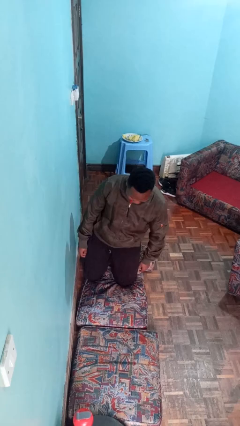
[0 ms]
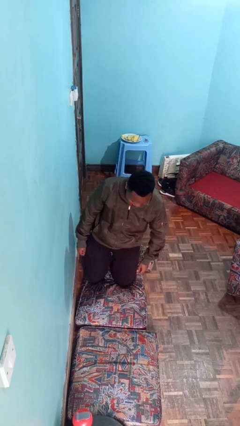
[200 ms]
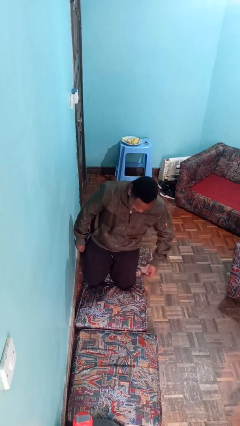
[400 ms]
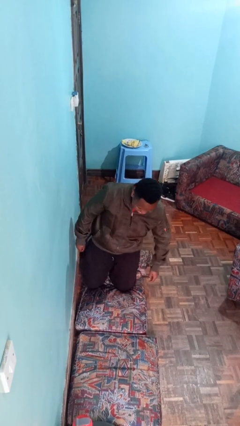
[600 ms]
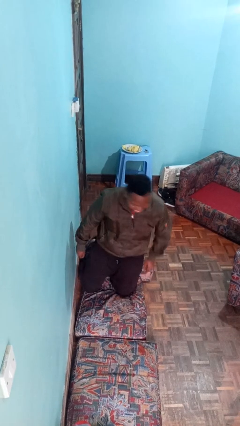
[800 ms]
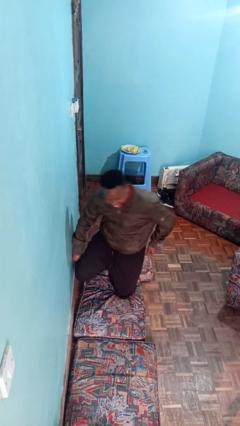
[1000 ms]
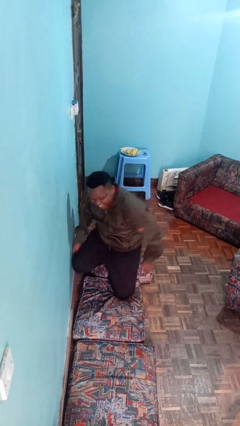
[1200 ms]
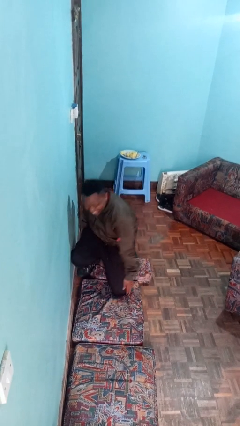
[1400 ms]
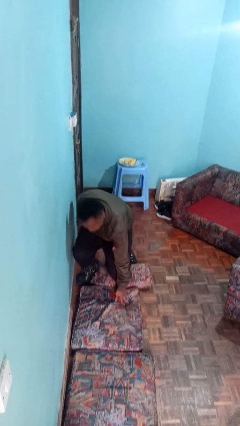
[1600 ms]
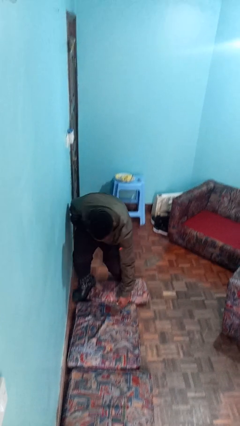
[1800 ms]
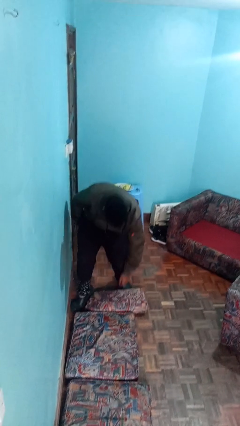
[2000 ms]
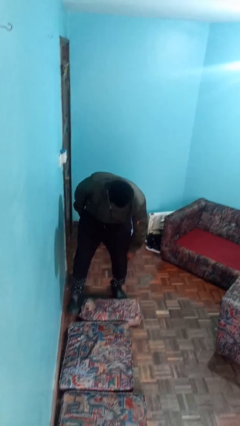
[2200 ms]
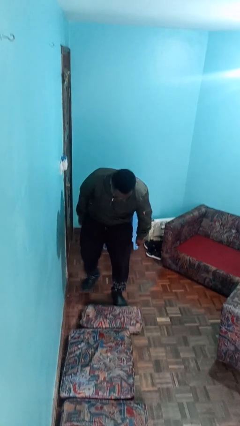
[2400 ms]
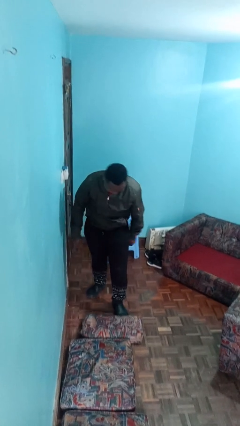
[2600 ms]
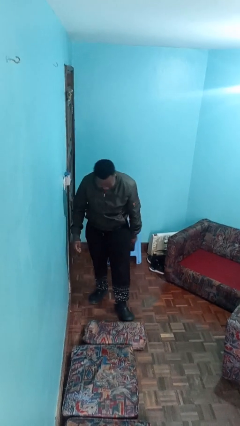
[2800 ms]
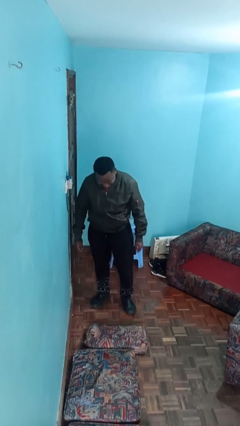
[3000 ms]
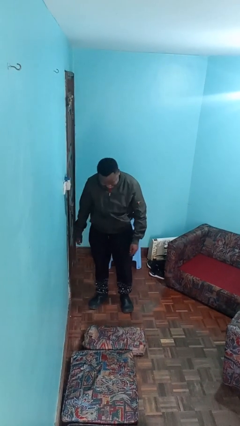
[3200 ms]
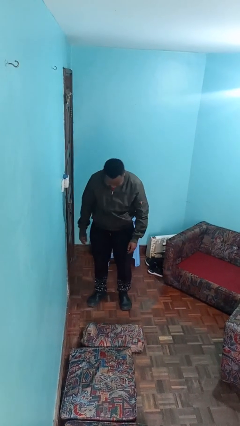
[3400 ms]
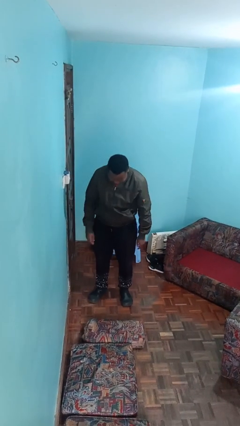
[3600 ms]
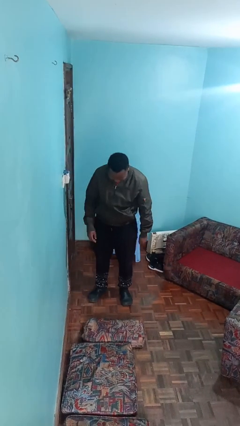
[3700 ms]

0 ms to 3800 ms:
person stands up from floor

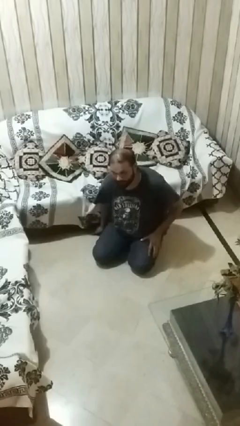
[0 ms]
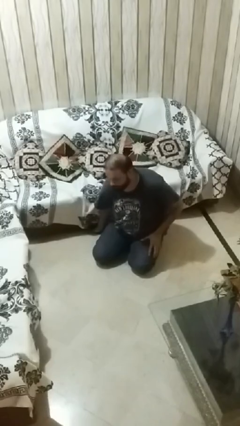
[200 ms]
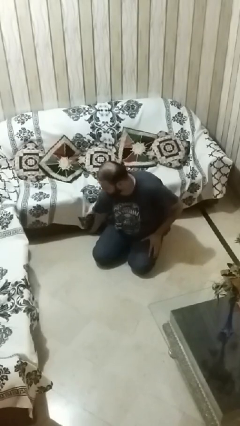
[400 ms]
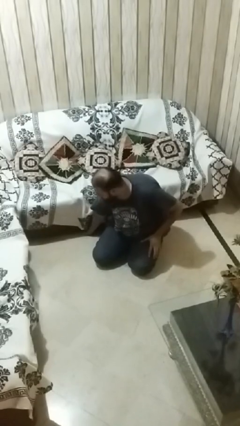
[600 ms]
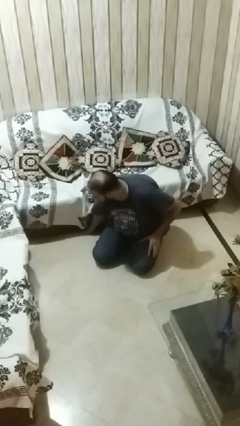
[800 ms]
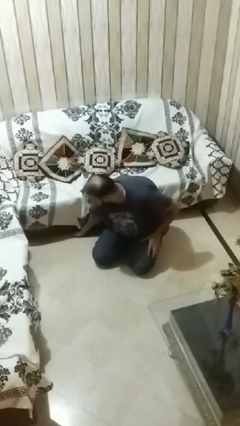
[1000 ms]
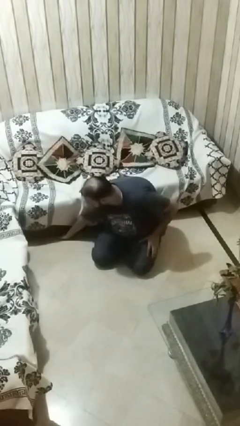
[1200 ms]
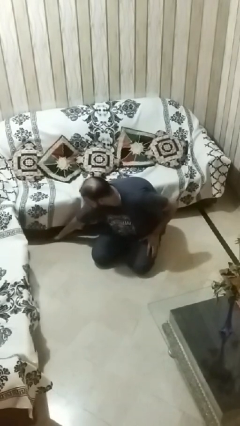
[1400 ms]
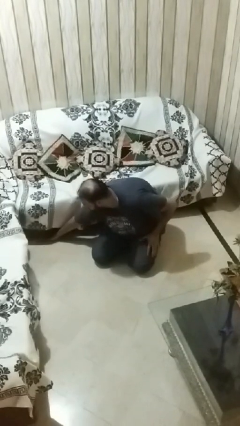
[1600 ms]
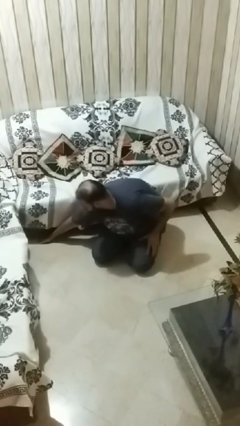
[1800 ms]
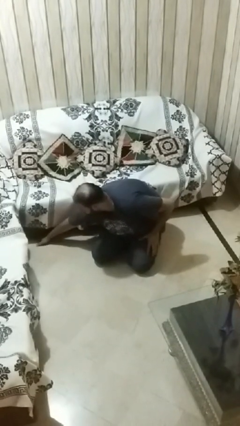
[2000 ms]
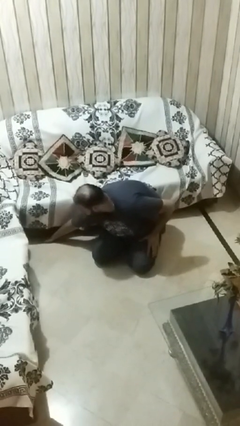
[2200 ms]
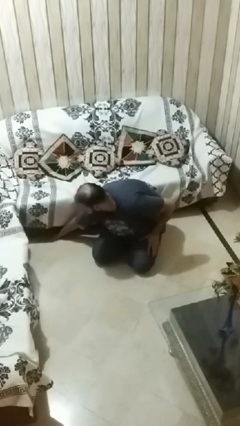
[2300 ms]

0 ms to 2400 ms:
person searches under couch

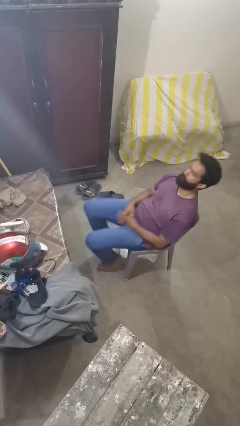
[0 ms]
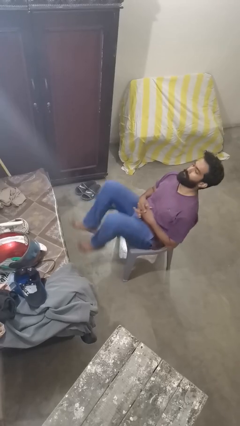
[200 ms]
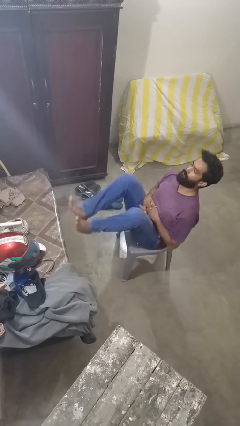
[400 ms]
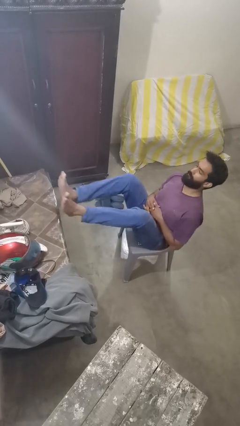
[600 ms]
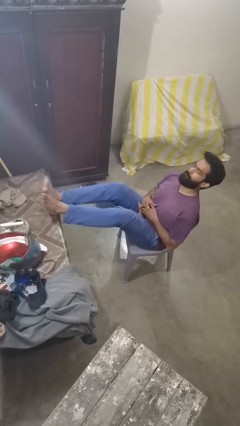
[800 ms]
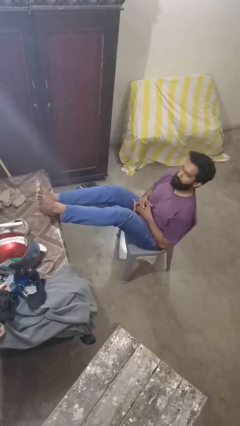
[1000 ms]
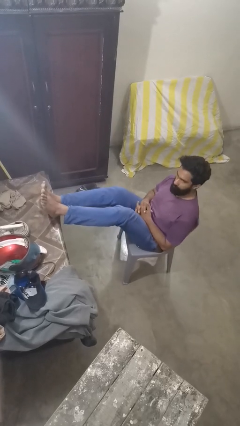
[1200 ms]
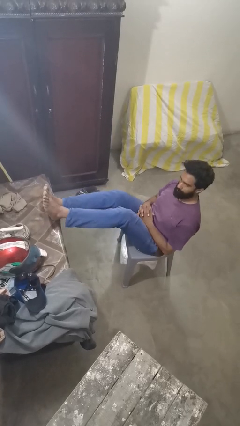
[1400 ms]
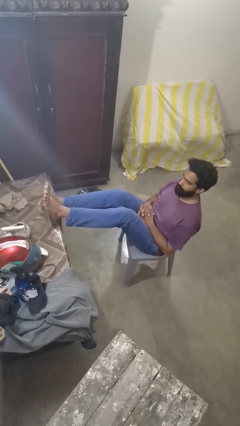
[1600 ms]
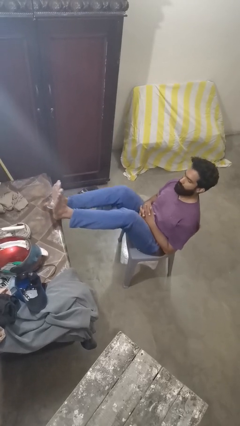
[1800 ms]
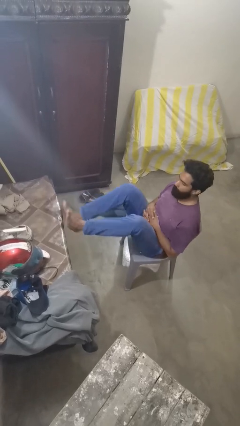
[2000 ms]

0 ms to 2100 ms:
person puts feet up

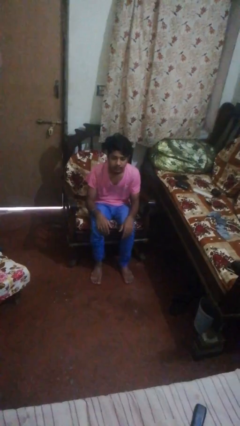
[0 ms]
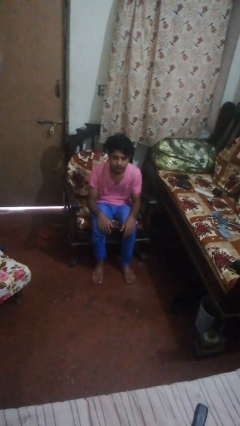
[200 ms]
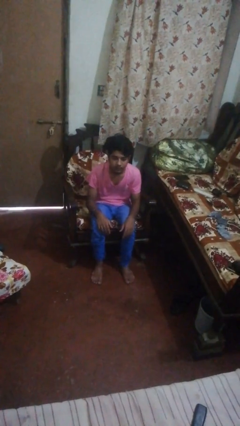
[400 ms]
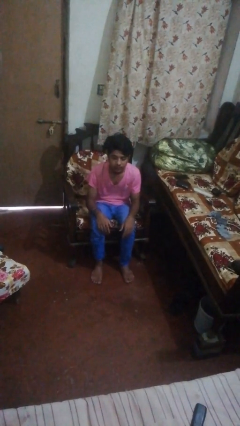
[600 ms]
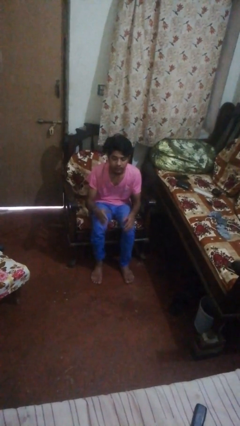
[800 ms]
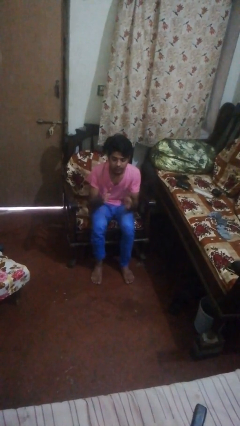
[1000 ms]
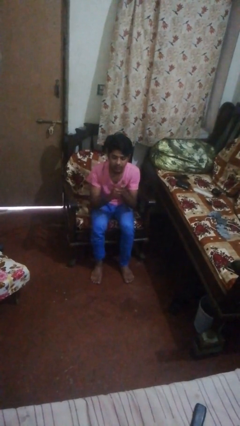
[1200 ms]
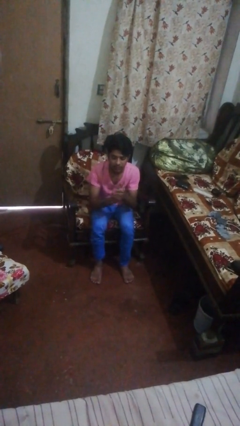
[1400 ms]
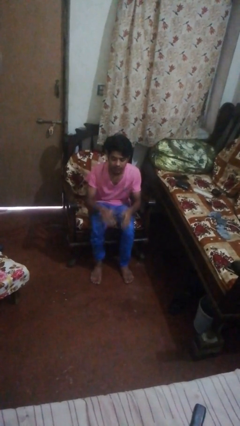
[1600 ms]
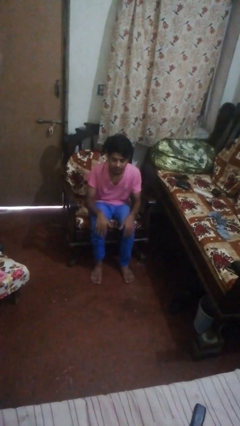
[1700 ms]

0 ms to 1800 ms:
person claps hands

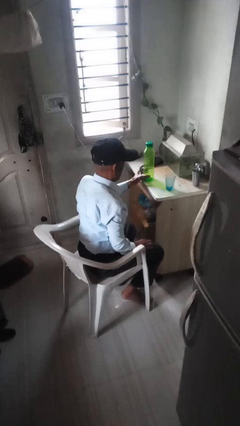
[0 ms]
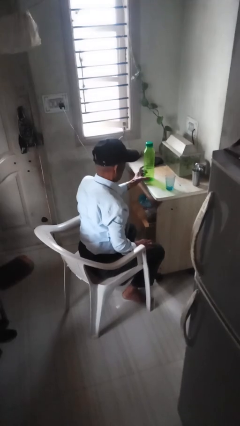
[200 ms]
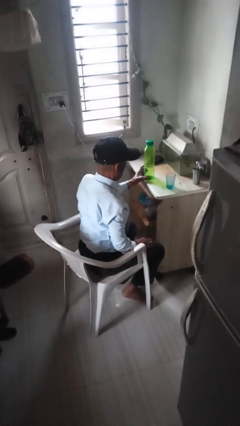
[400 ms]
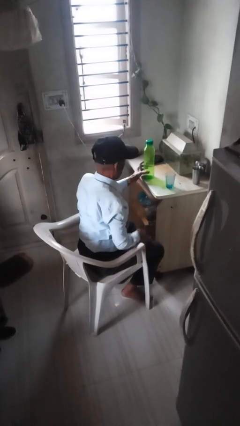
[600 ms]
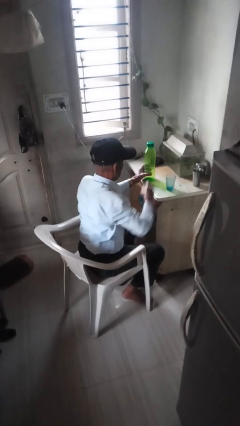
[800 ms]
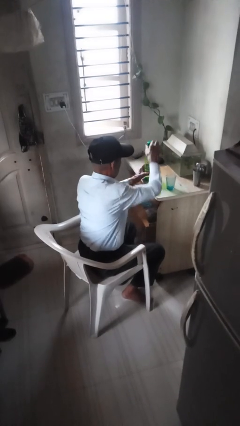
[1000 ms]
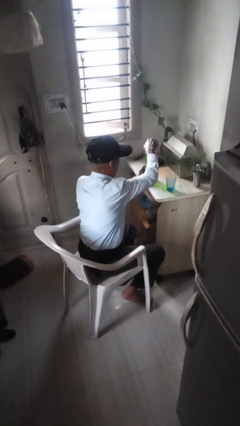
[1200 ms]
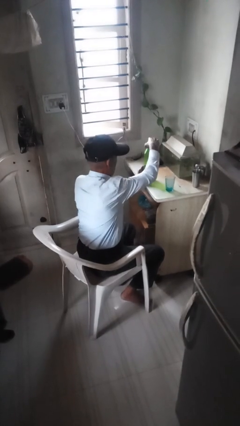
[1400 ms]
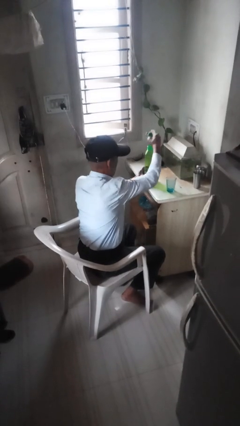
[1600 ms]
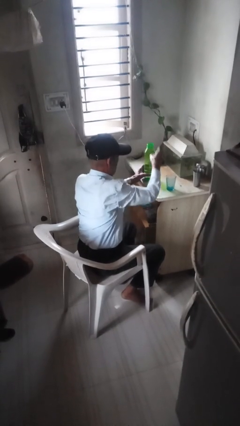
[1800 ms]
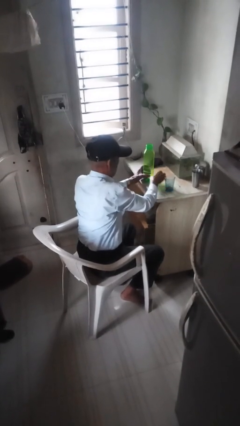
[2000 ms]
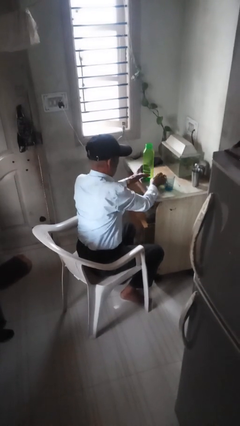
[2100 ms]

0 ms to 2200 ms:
person unscrews lid from bottle

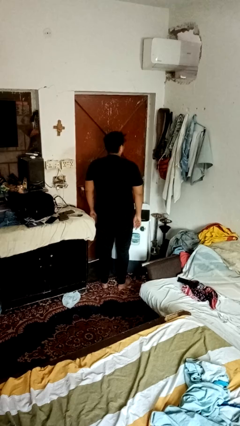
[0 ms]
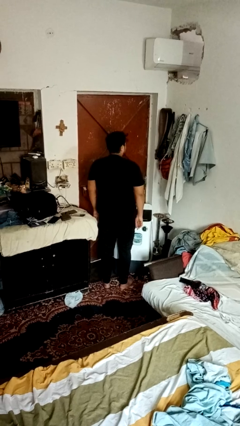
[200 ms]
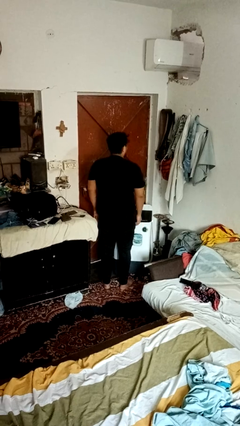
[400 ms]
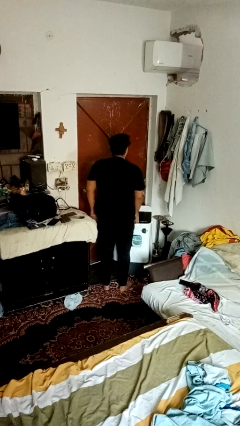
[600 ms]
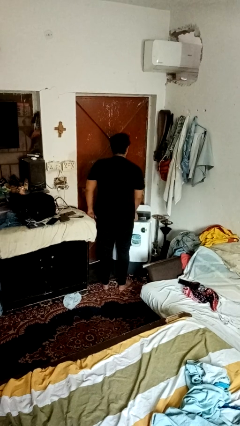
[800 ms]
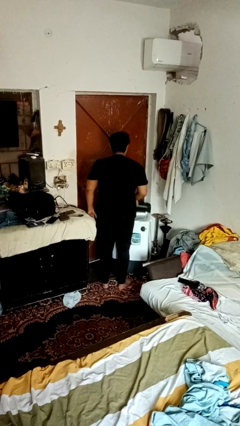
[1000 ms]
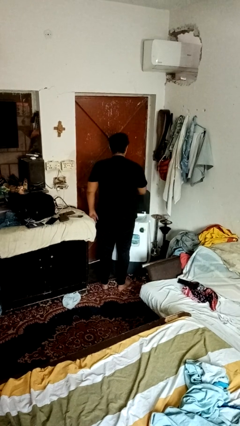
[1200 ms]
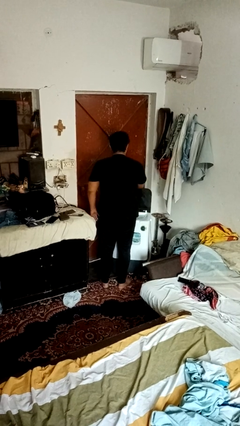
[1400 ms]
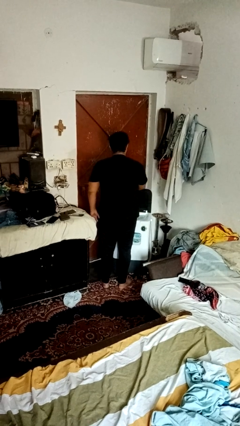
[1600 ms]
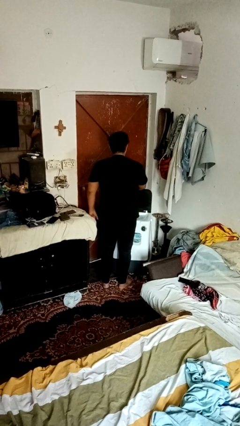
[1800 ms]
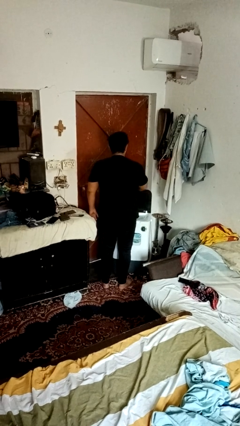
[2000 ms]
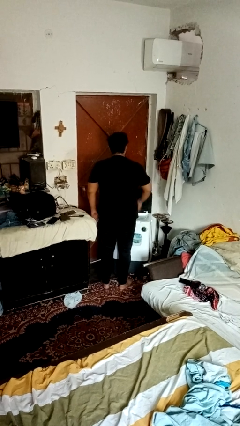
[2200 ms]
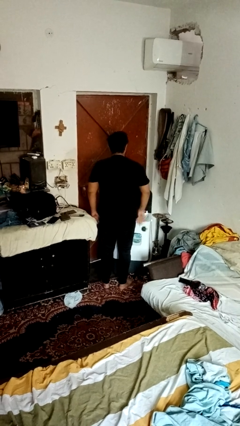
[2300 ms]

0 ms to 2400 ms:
person opens clothes washer

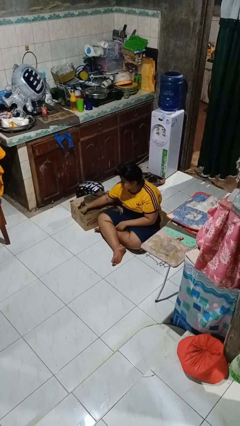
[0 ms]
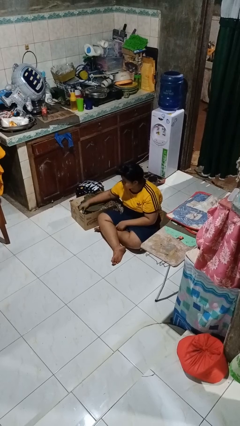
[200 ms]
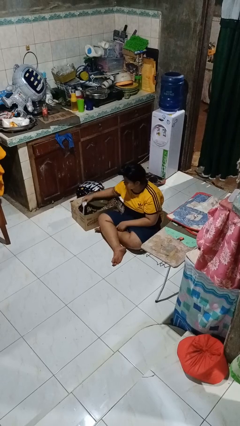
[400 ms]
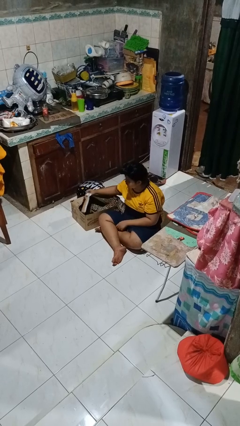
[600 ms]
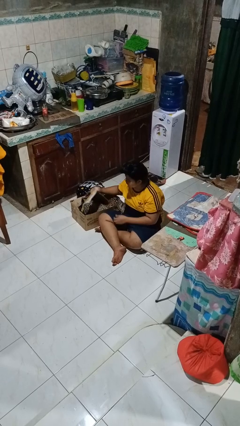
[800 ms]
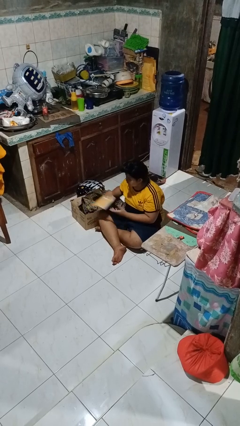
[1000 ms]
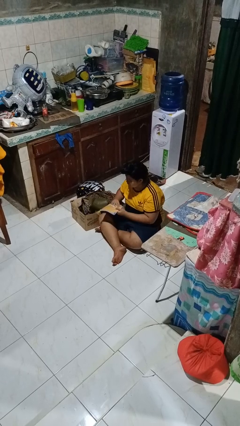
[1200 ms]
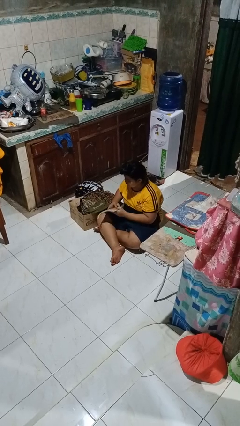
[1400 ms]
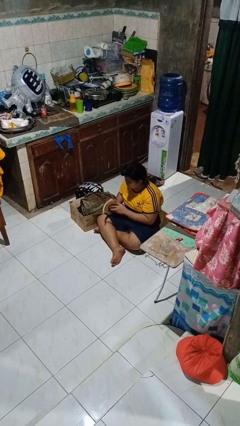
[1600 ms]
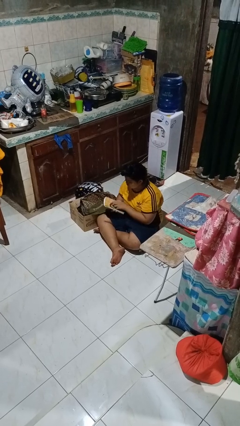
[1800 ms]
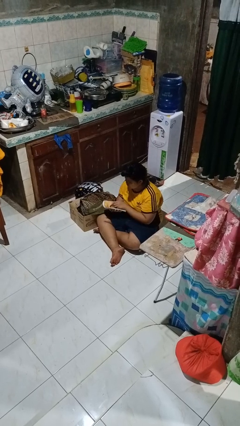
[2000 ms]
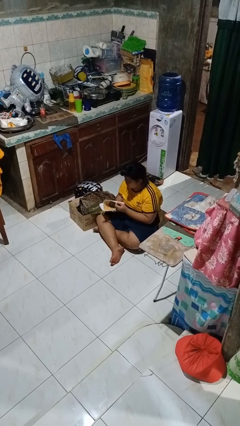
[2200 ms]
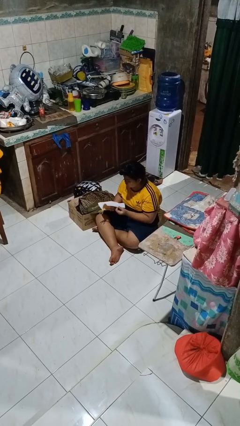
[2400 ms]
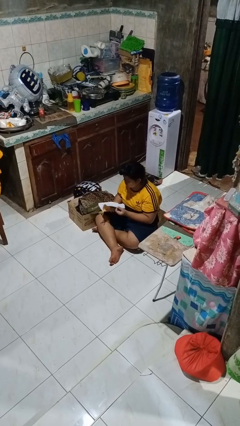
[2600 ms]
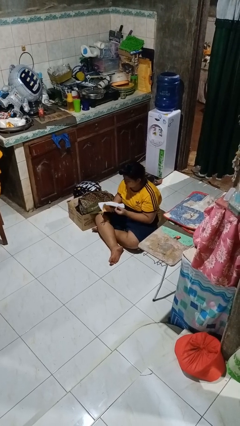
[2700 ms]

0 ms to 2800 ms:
person takes object from box
